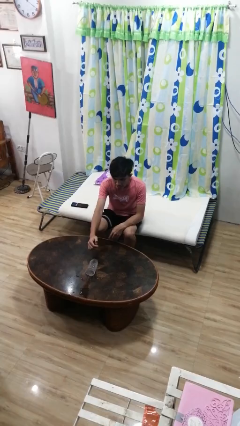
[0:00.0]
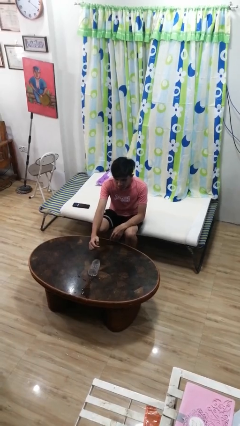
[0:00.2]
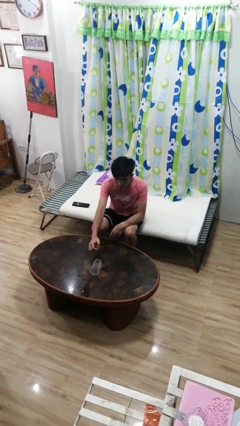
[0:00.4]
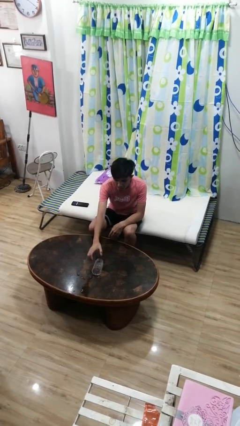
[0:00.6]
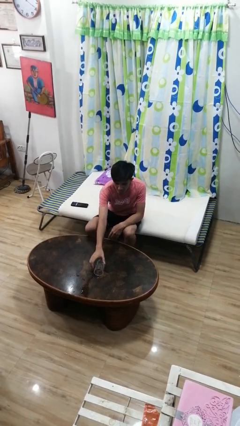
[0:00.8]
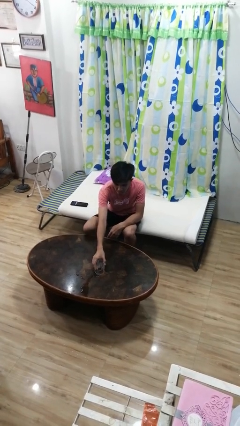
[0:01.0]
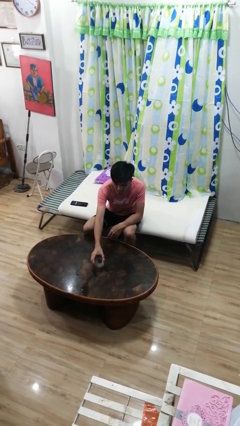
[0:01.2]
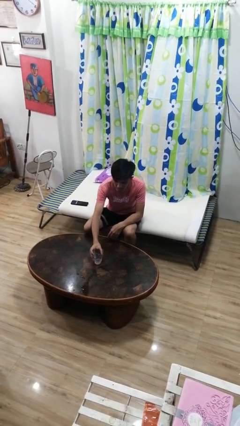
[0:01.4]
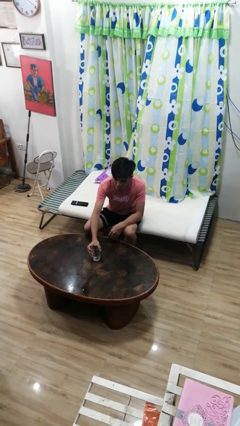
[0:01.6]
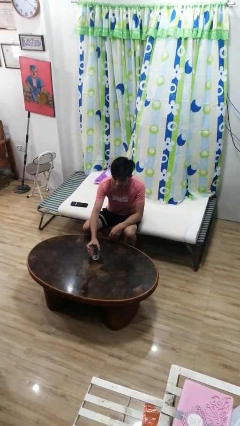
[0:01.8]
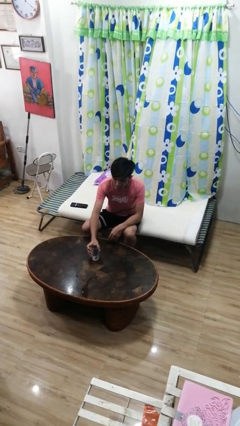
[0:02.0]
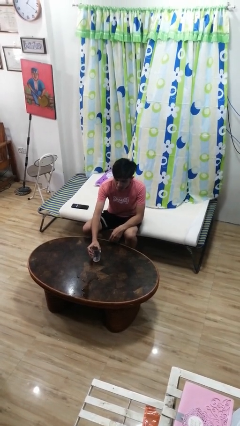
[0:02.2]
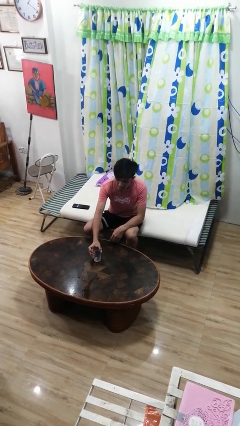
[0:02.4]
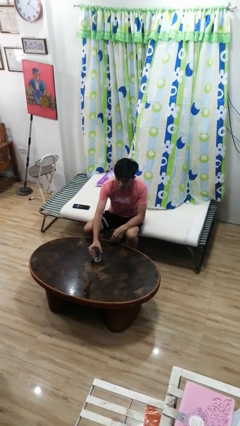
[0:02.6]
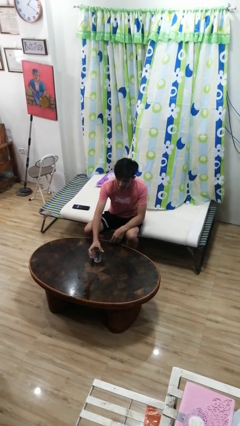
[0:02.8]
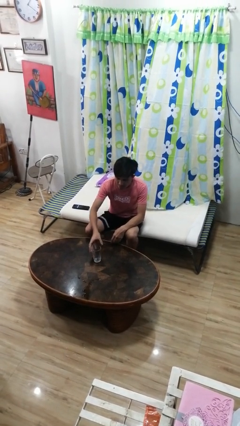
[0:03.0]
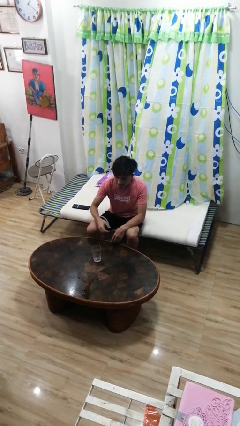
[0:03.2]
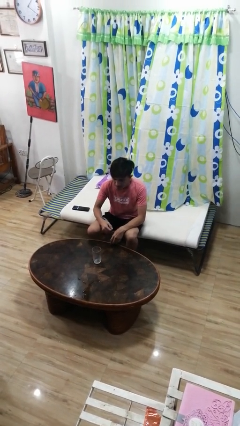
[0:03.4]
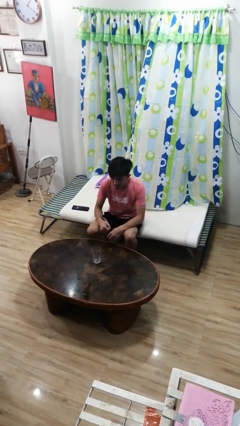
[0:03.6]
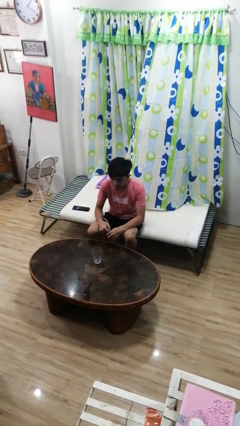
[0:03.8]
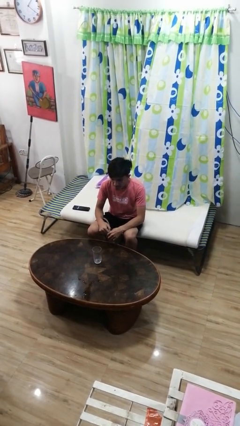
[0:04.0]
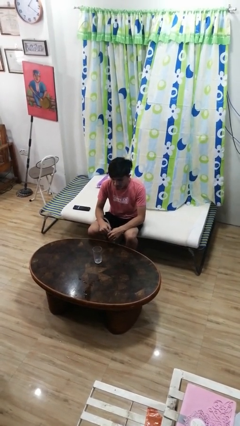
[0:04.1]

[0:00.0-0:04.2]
person sets upright glass

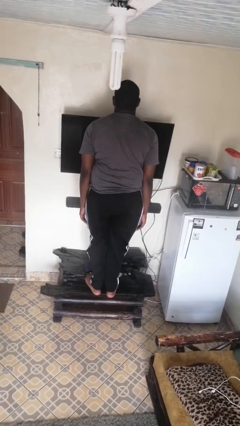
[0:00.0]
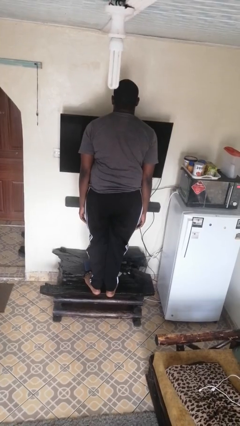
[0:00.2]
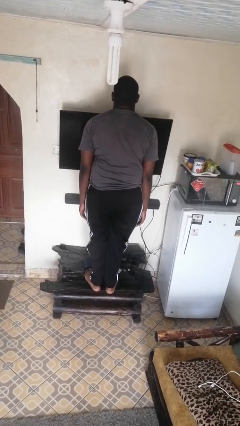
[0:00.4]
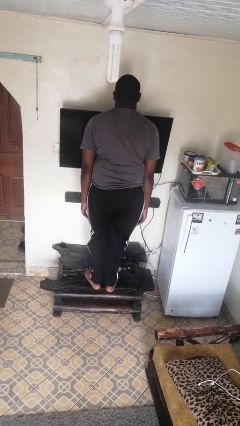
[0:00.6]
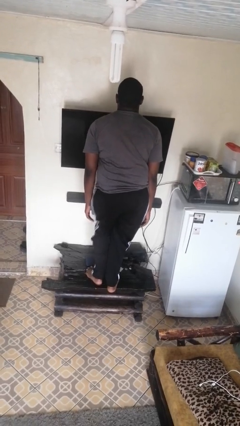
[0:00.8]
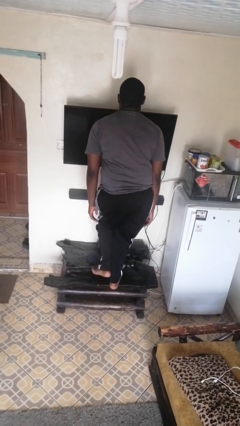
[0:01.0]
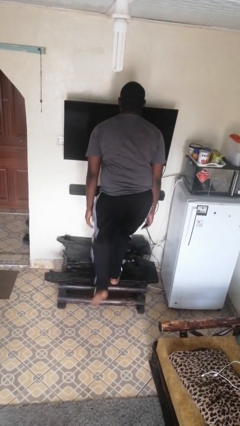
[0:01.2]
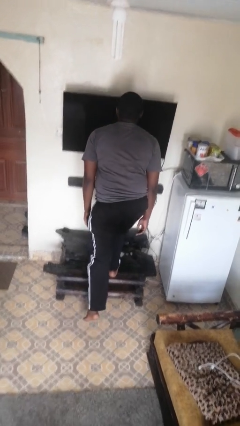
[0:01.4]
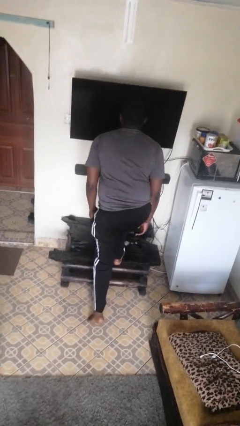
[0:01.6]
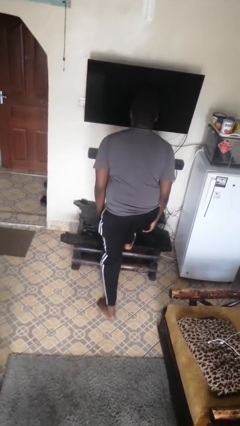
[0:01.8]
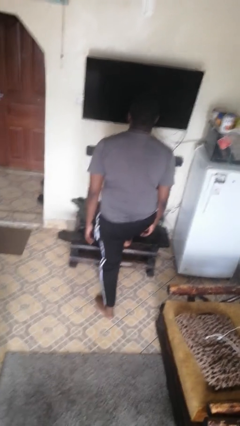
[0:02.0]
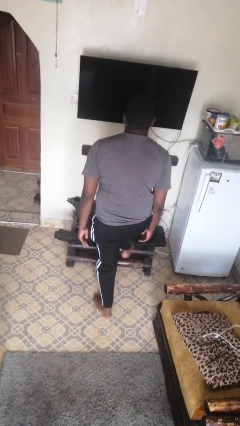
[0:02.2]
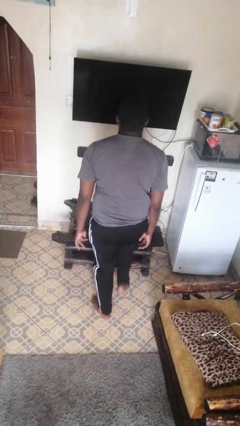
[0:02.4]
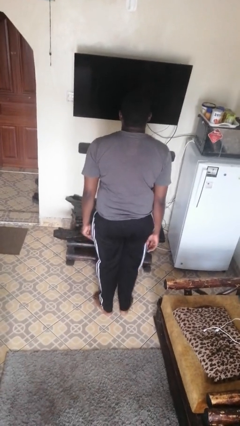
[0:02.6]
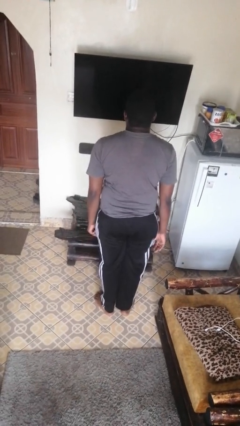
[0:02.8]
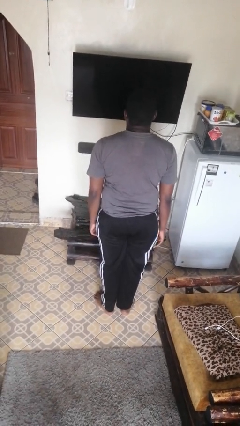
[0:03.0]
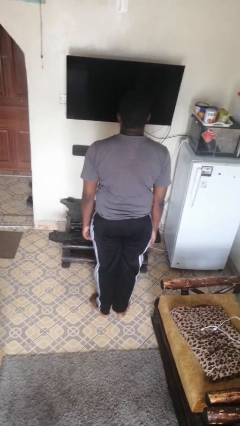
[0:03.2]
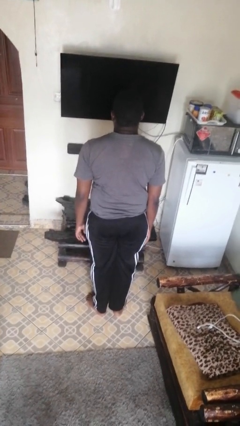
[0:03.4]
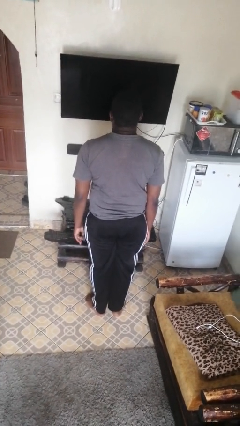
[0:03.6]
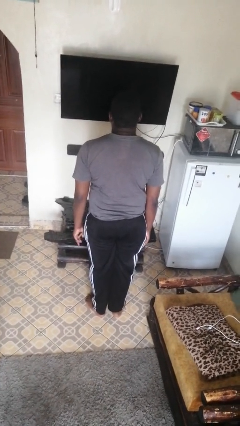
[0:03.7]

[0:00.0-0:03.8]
person climbs off table

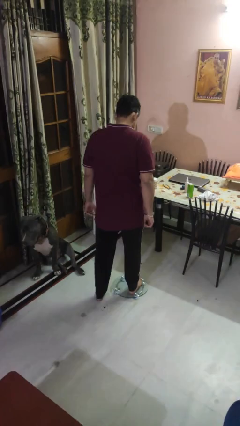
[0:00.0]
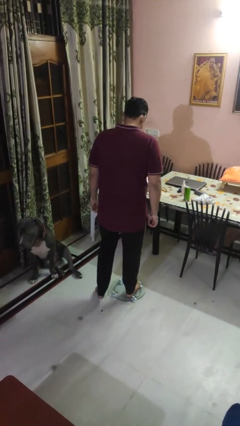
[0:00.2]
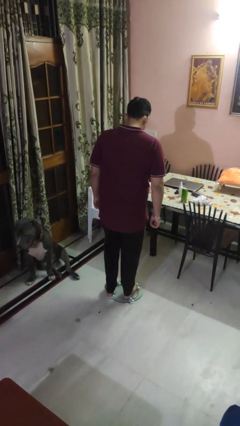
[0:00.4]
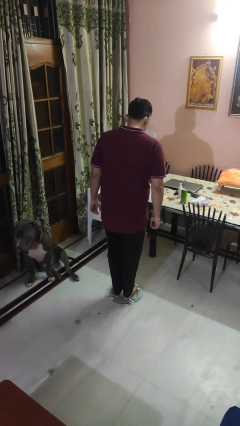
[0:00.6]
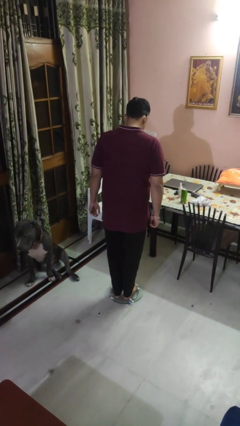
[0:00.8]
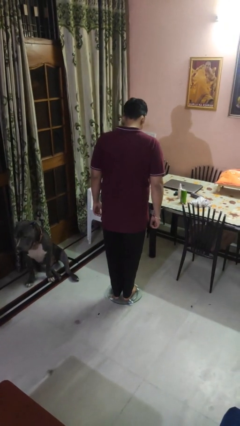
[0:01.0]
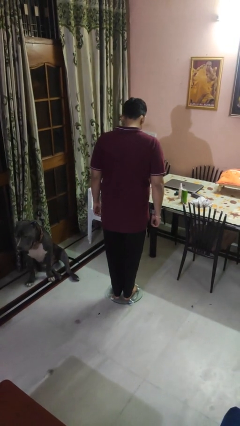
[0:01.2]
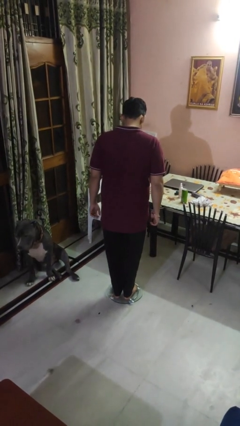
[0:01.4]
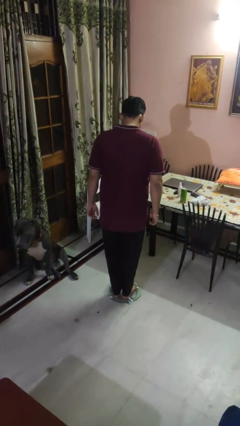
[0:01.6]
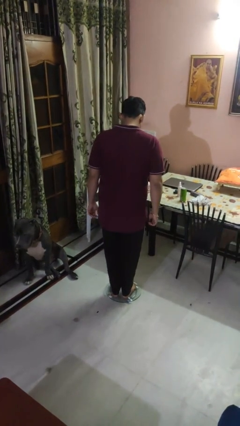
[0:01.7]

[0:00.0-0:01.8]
person uses bodyweight scale

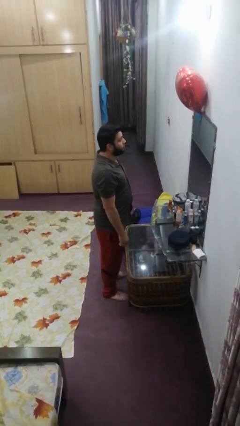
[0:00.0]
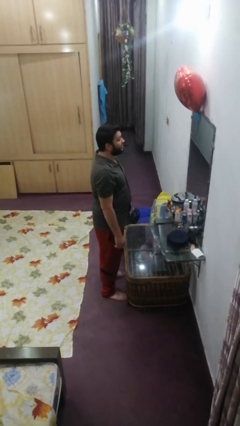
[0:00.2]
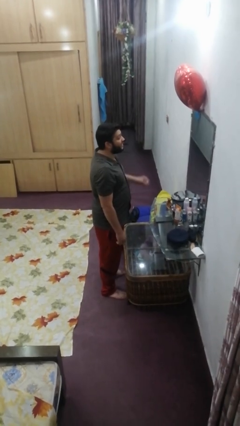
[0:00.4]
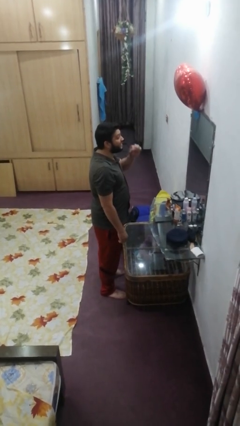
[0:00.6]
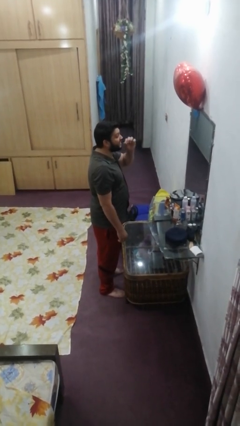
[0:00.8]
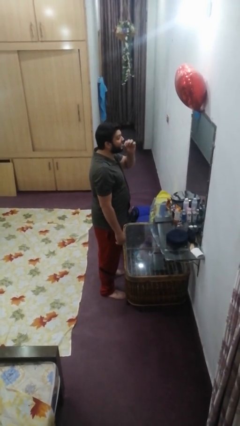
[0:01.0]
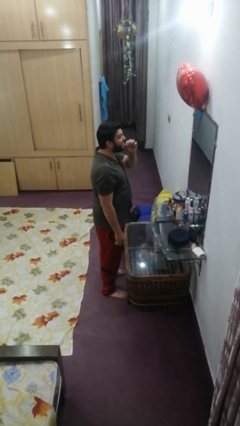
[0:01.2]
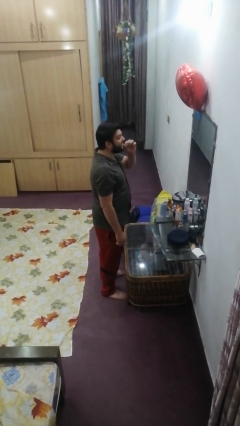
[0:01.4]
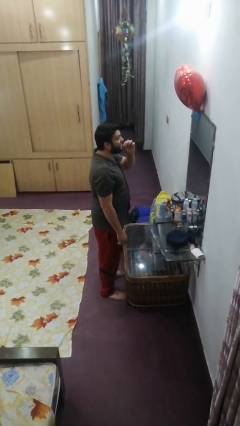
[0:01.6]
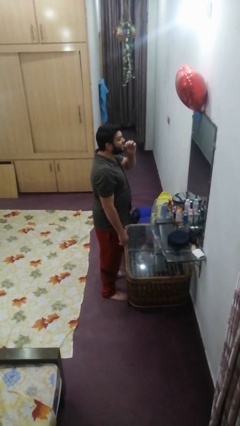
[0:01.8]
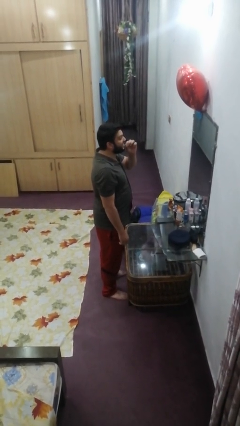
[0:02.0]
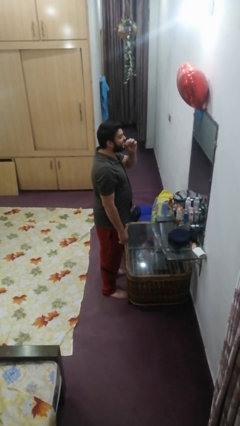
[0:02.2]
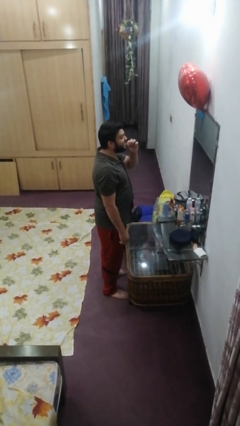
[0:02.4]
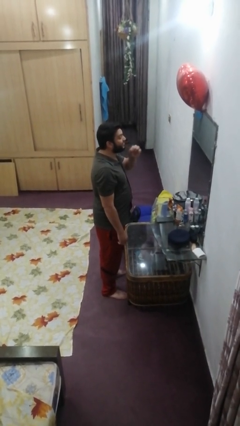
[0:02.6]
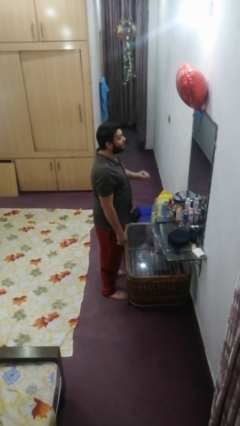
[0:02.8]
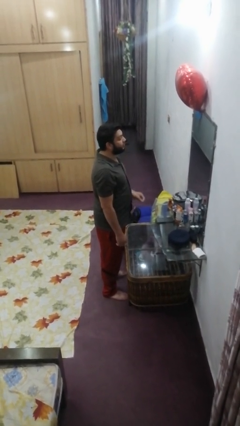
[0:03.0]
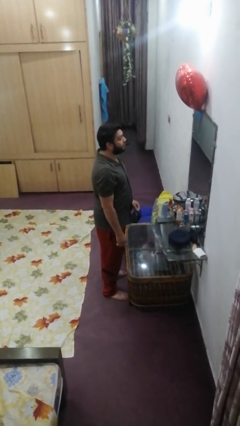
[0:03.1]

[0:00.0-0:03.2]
person flosses

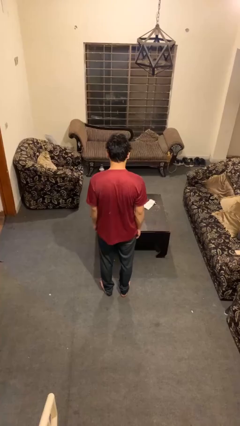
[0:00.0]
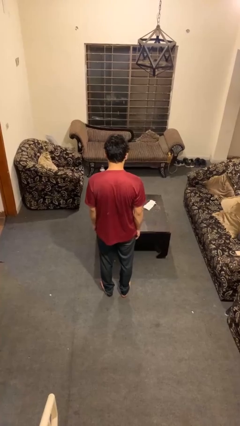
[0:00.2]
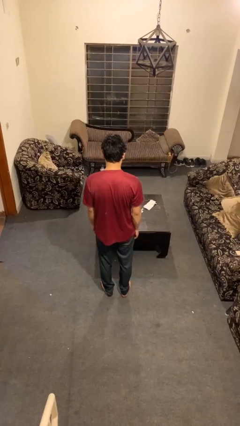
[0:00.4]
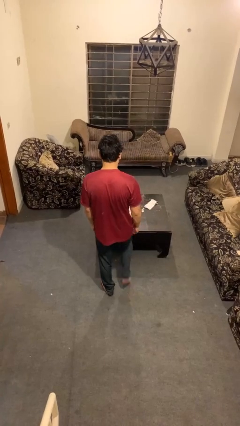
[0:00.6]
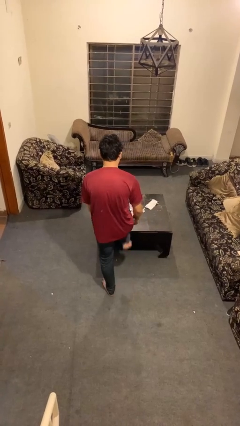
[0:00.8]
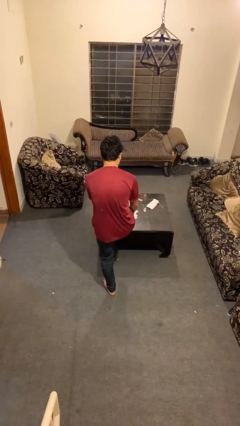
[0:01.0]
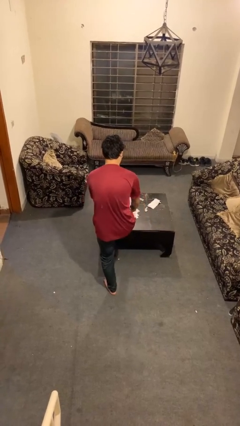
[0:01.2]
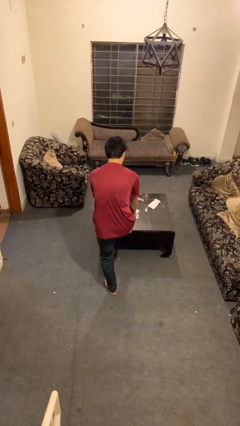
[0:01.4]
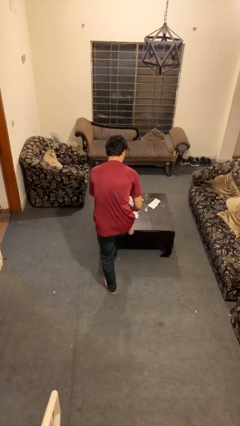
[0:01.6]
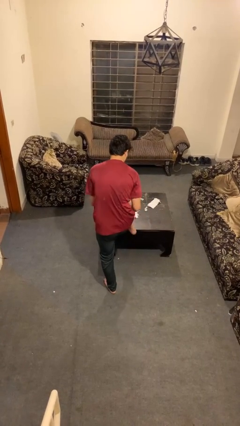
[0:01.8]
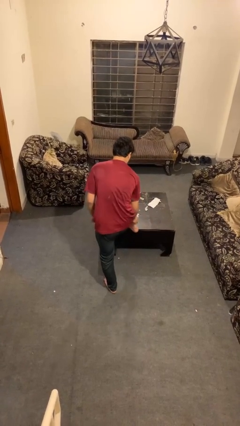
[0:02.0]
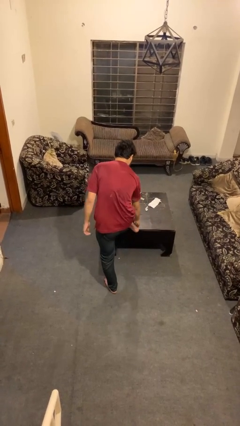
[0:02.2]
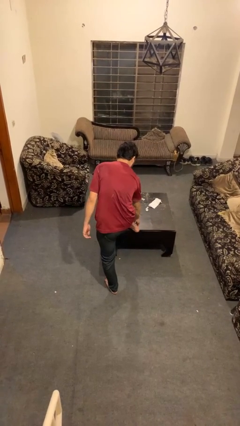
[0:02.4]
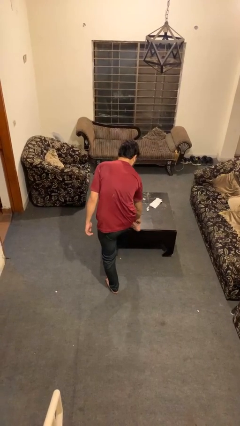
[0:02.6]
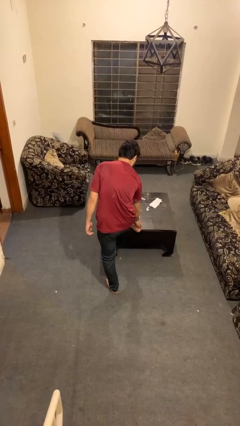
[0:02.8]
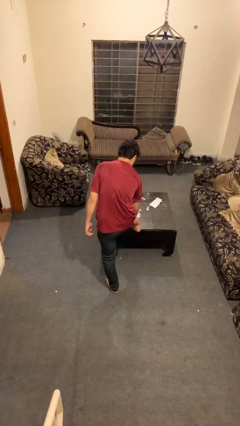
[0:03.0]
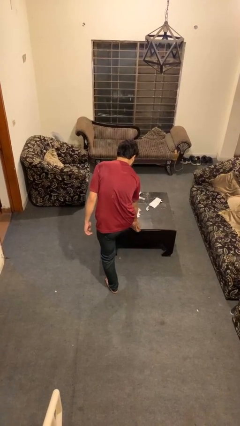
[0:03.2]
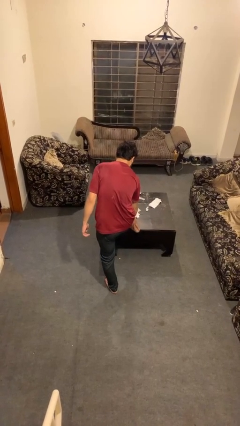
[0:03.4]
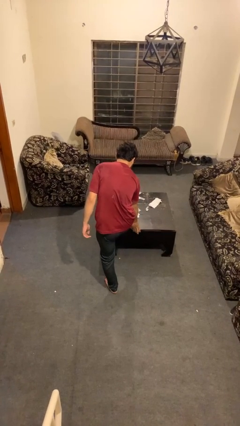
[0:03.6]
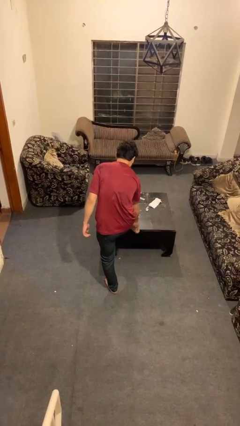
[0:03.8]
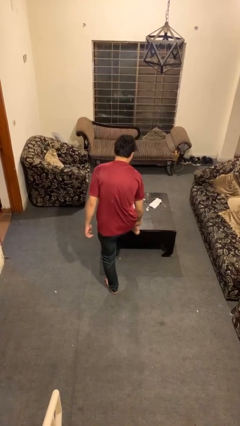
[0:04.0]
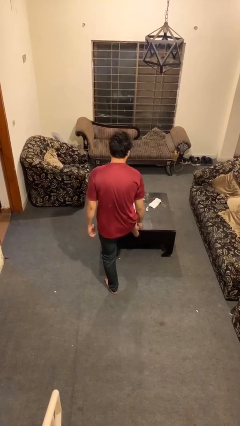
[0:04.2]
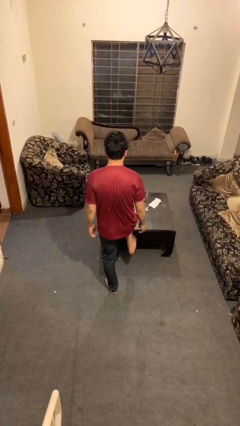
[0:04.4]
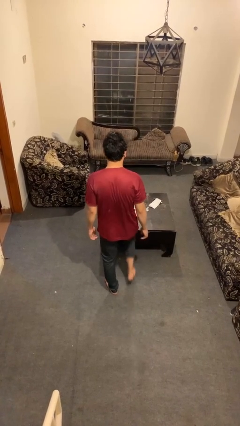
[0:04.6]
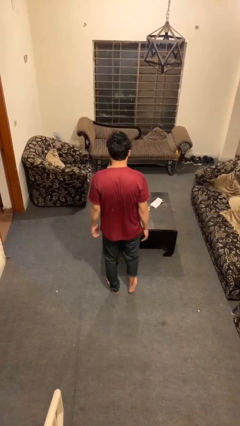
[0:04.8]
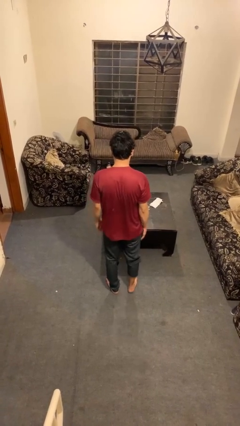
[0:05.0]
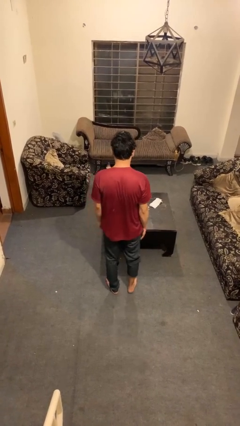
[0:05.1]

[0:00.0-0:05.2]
person rubs foot
